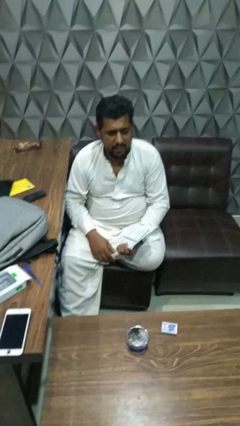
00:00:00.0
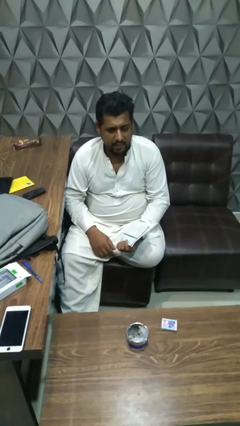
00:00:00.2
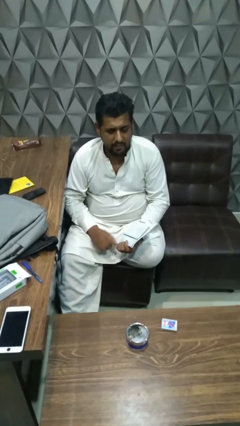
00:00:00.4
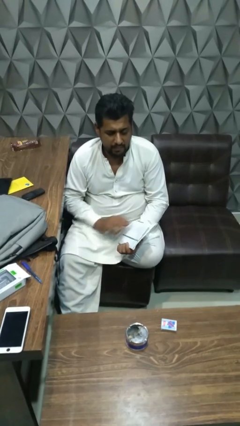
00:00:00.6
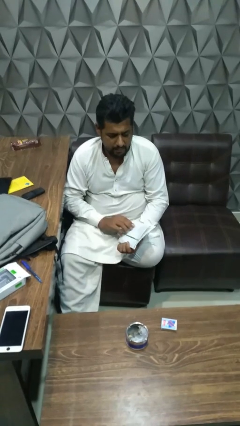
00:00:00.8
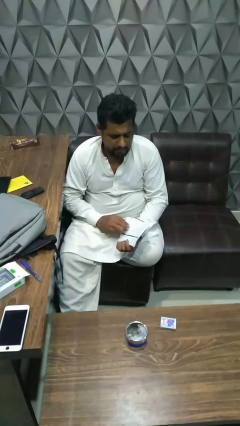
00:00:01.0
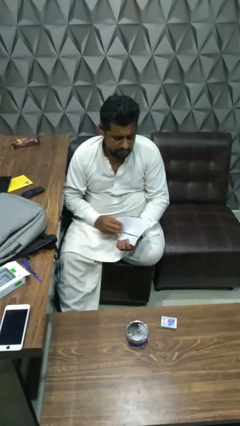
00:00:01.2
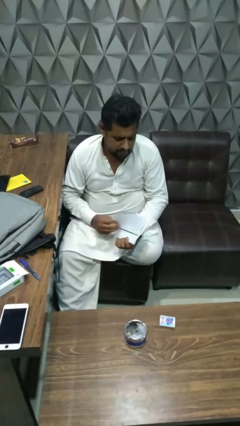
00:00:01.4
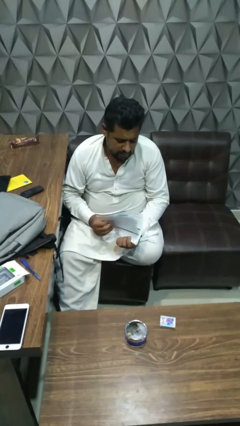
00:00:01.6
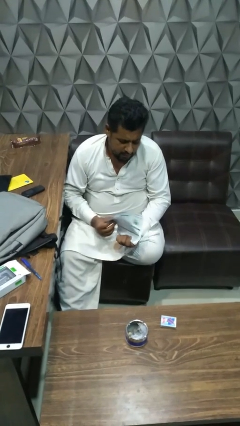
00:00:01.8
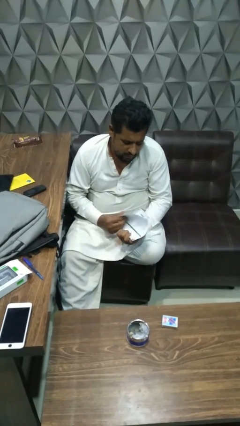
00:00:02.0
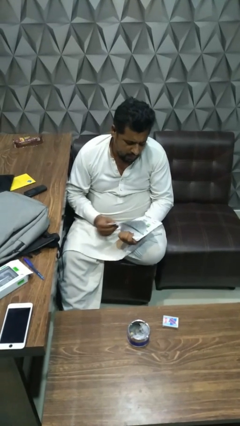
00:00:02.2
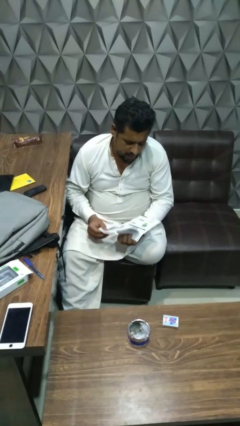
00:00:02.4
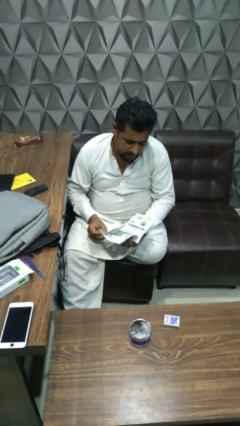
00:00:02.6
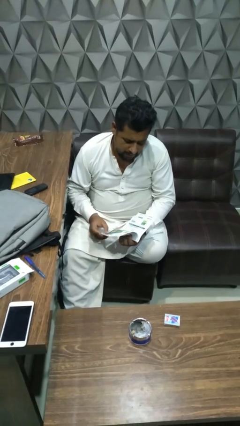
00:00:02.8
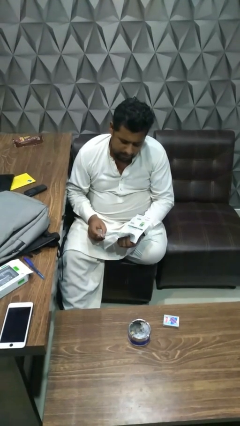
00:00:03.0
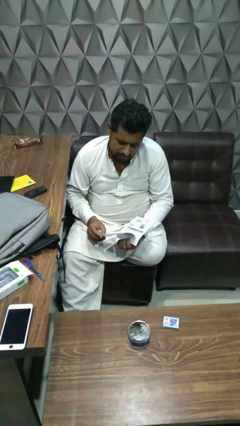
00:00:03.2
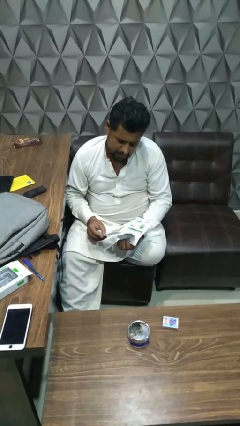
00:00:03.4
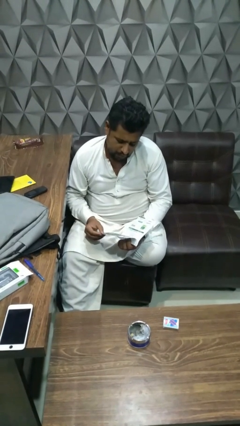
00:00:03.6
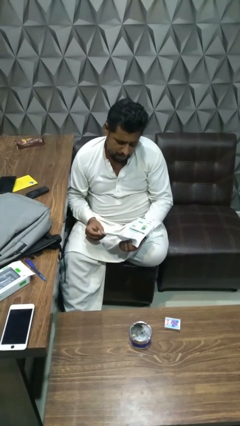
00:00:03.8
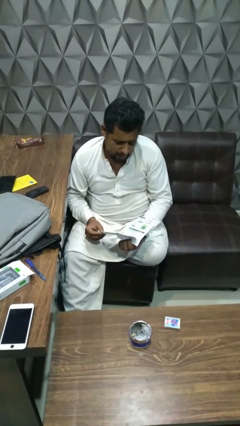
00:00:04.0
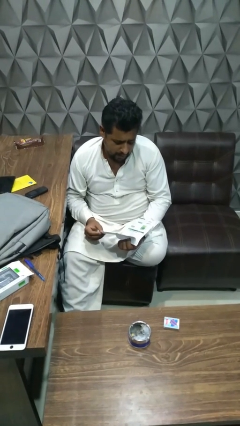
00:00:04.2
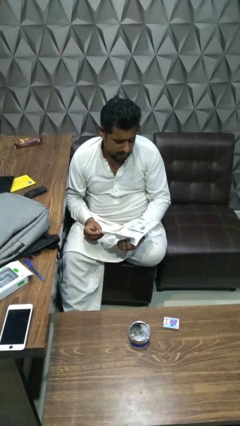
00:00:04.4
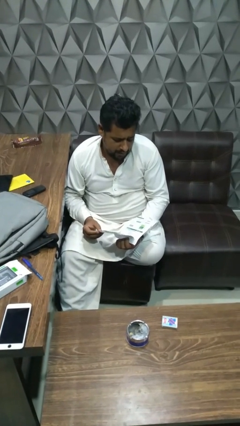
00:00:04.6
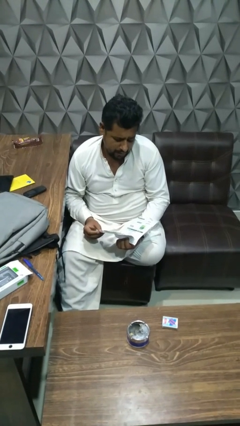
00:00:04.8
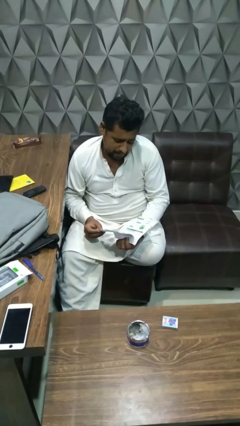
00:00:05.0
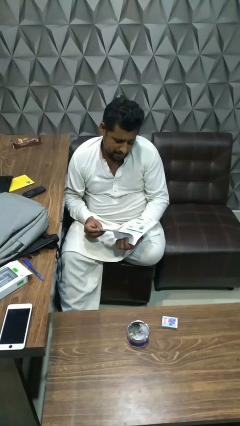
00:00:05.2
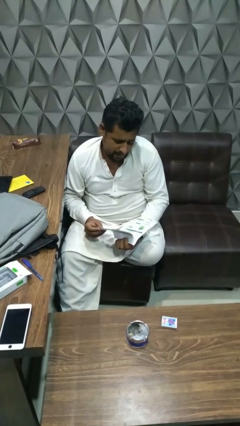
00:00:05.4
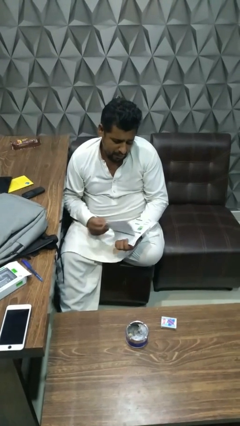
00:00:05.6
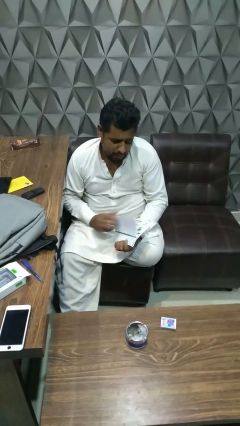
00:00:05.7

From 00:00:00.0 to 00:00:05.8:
person reads book

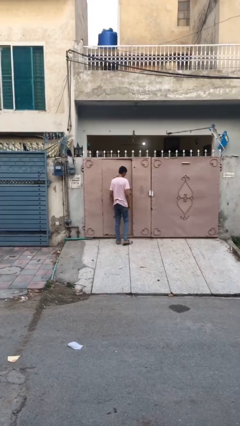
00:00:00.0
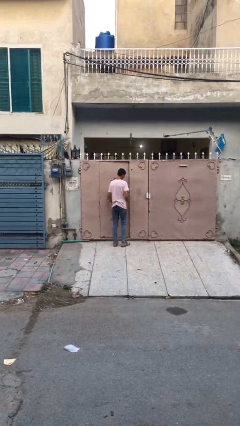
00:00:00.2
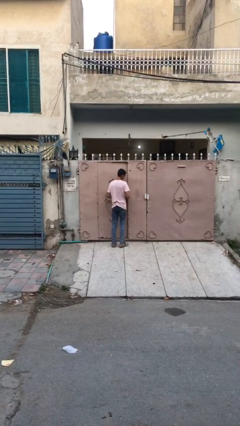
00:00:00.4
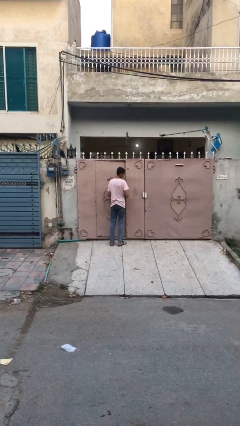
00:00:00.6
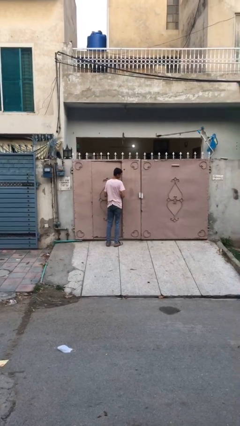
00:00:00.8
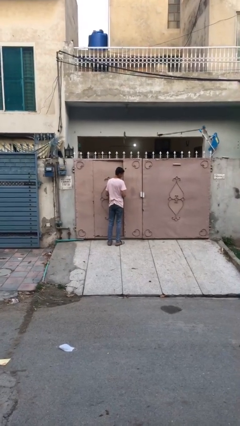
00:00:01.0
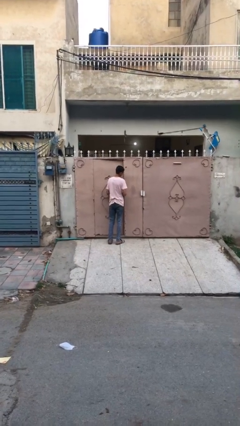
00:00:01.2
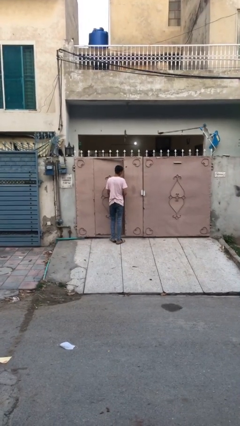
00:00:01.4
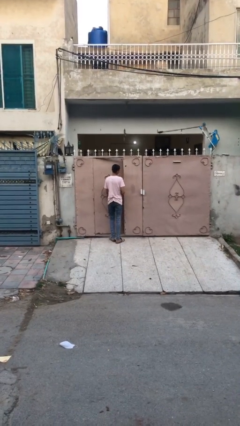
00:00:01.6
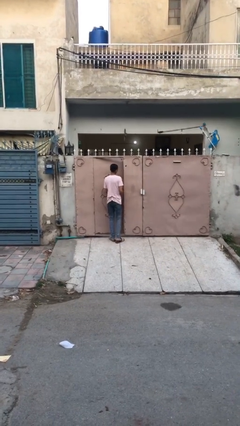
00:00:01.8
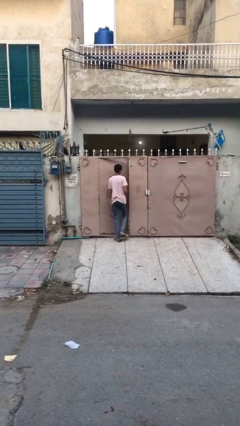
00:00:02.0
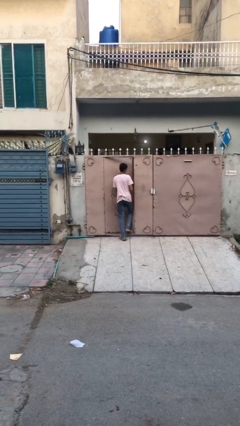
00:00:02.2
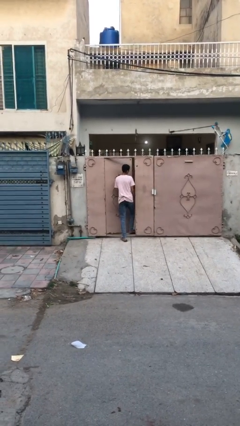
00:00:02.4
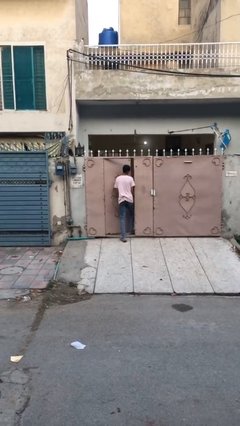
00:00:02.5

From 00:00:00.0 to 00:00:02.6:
person opens facility door

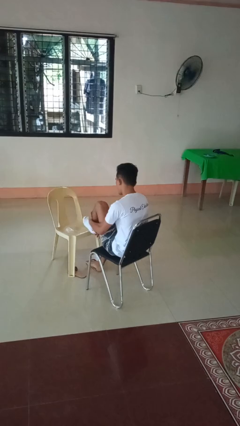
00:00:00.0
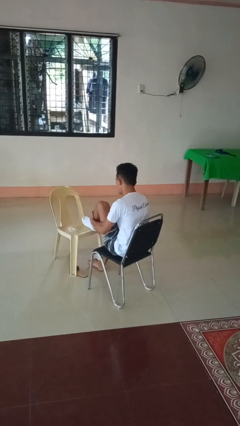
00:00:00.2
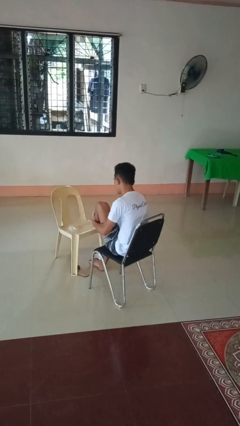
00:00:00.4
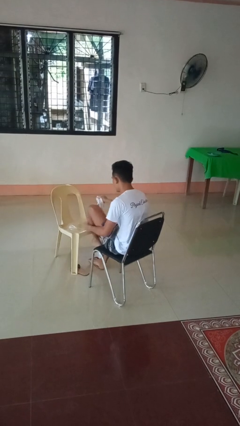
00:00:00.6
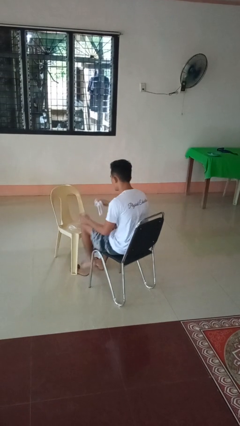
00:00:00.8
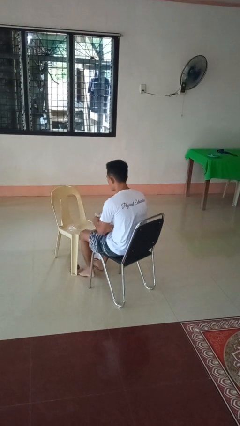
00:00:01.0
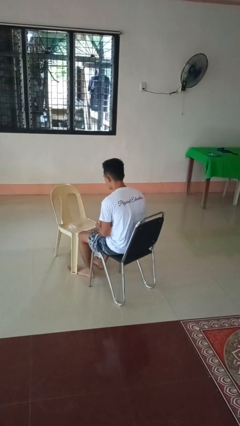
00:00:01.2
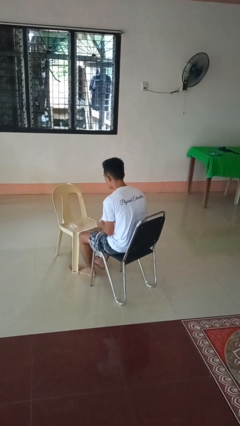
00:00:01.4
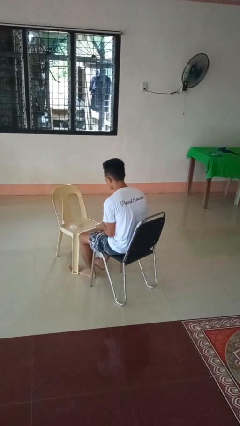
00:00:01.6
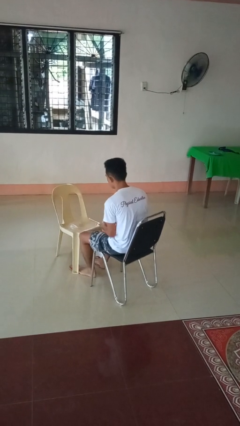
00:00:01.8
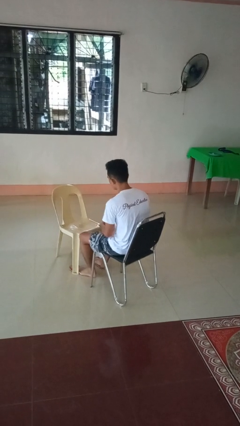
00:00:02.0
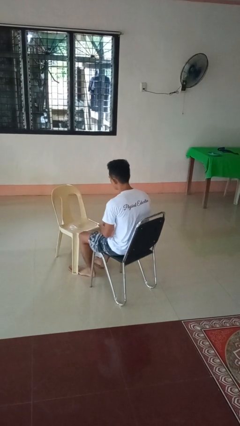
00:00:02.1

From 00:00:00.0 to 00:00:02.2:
person takes off socks

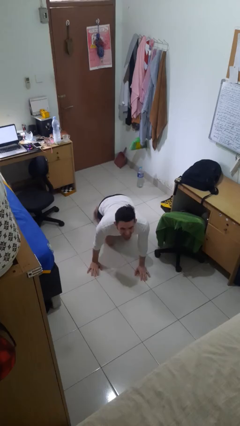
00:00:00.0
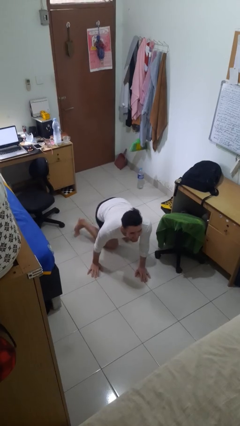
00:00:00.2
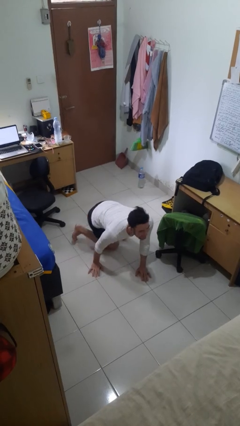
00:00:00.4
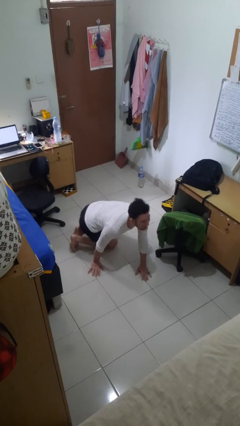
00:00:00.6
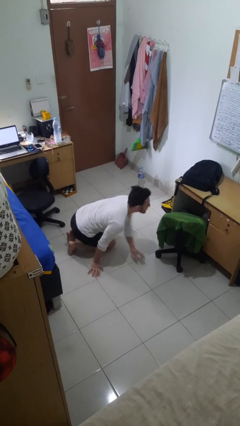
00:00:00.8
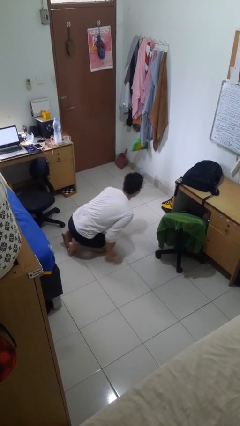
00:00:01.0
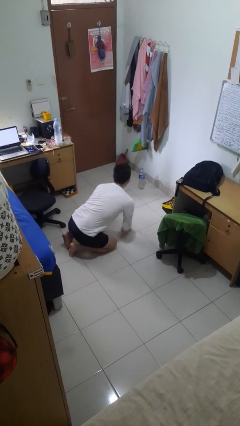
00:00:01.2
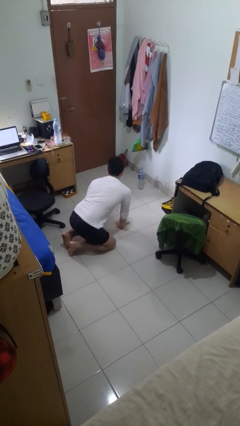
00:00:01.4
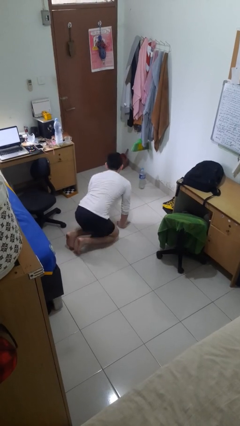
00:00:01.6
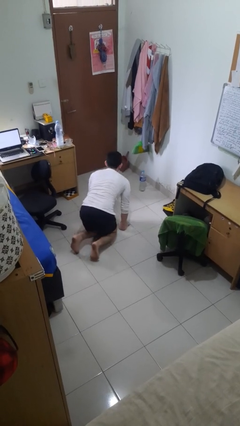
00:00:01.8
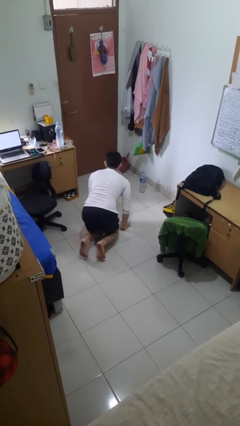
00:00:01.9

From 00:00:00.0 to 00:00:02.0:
person crawls

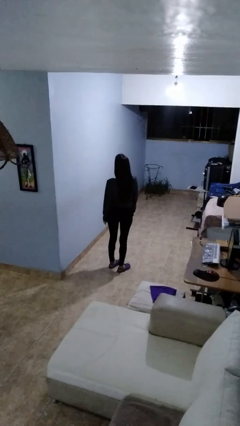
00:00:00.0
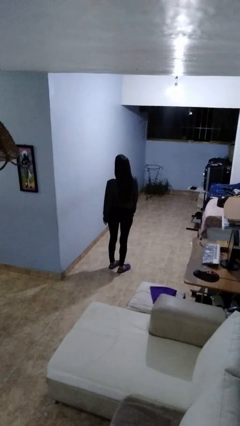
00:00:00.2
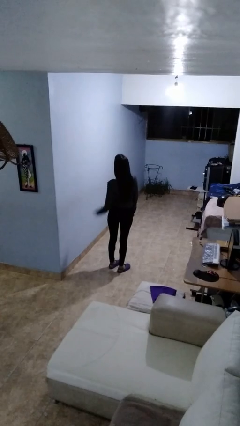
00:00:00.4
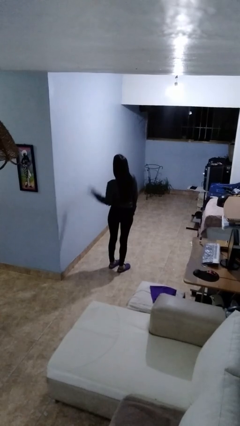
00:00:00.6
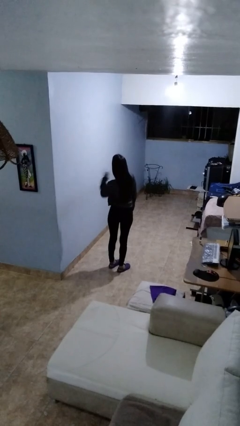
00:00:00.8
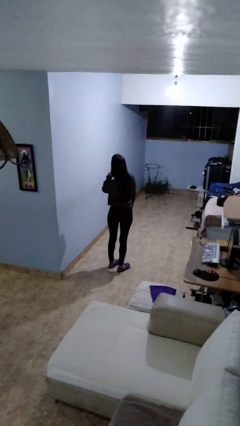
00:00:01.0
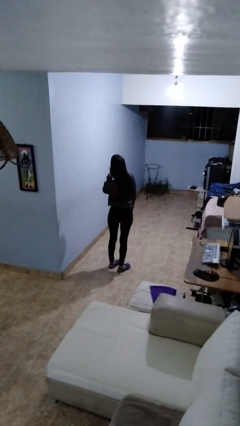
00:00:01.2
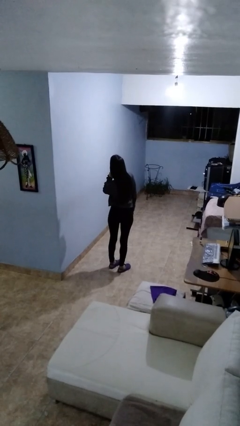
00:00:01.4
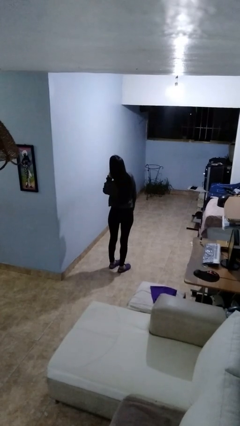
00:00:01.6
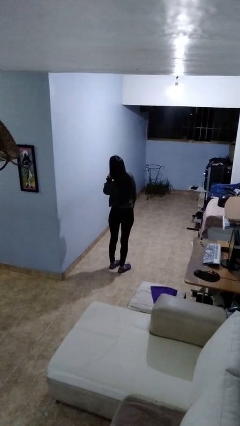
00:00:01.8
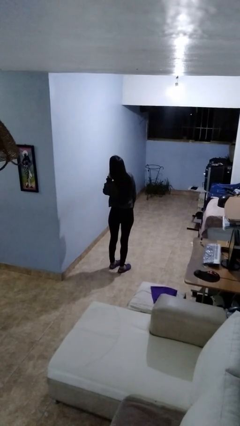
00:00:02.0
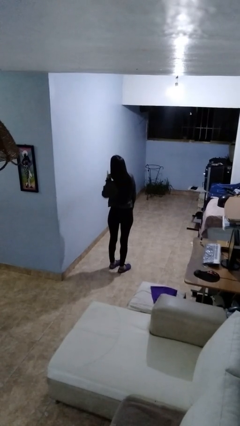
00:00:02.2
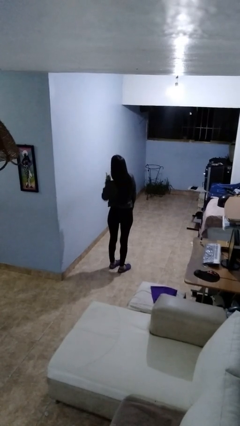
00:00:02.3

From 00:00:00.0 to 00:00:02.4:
person gestures listen closely

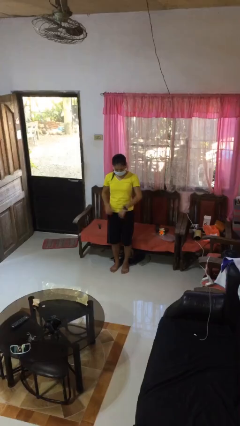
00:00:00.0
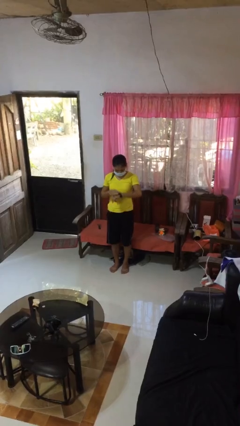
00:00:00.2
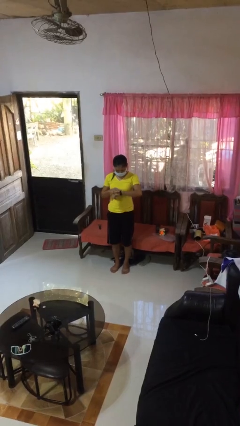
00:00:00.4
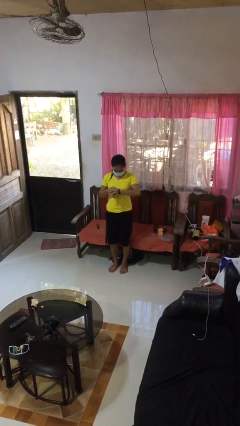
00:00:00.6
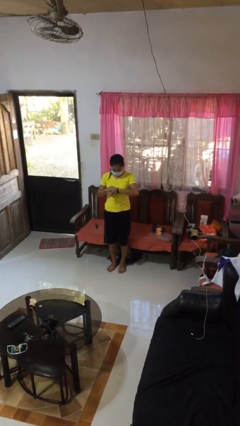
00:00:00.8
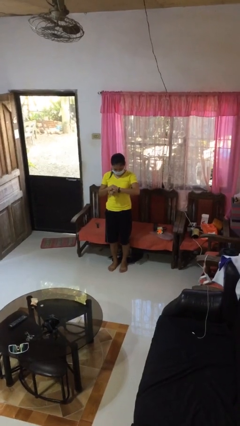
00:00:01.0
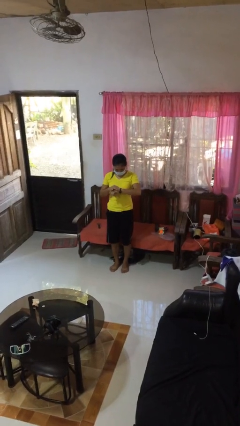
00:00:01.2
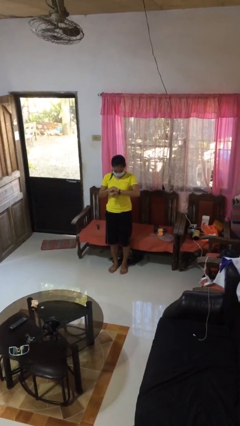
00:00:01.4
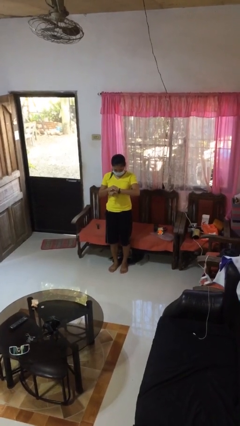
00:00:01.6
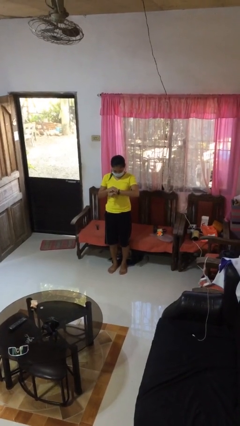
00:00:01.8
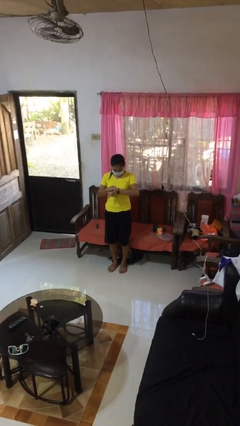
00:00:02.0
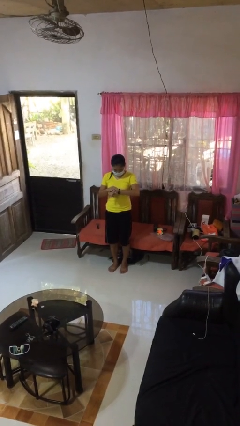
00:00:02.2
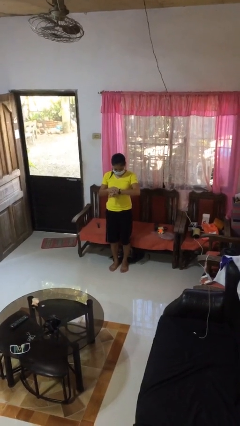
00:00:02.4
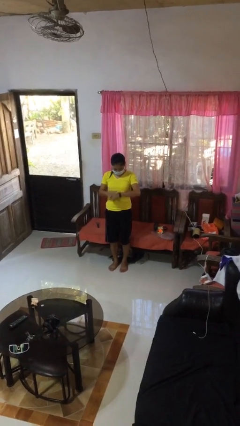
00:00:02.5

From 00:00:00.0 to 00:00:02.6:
person looks at wristwatch
